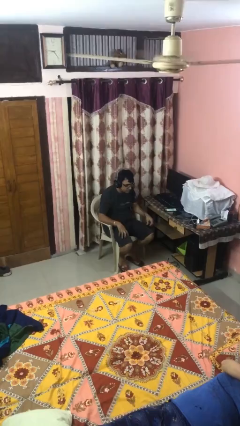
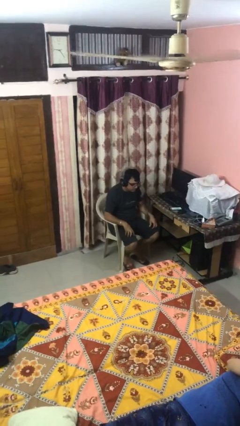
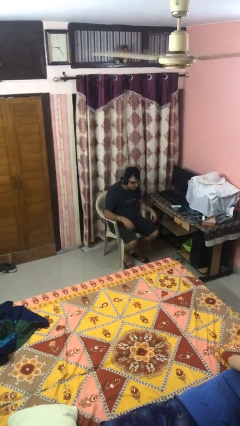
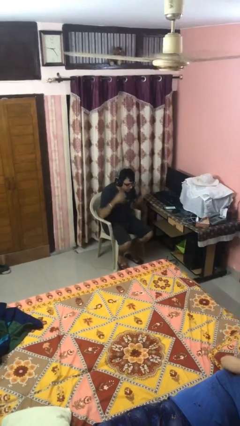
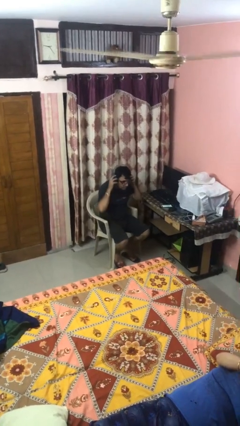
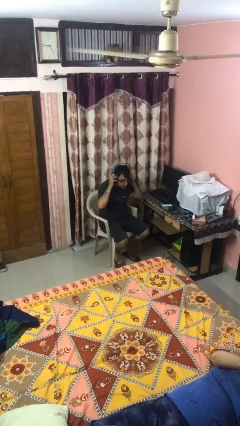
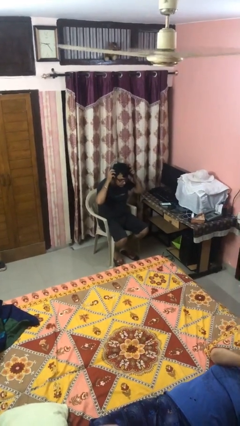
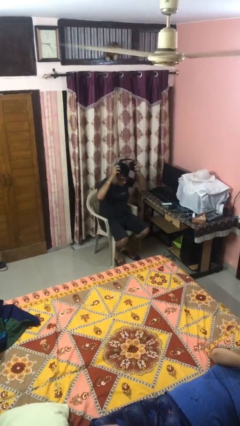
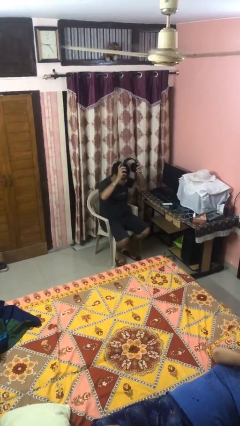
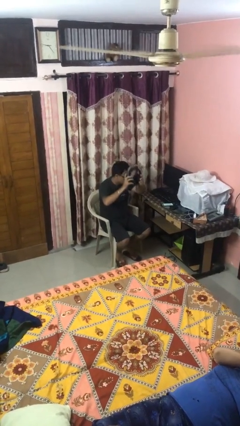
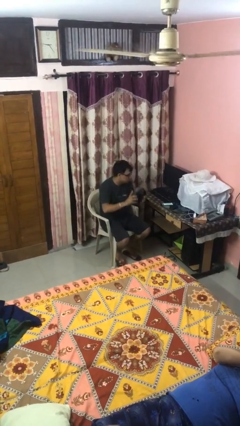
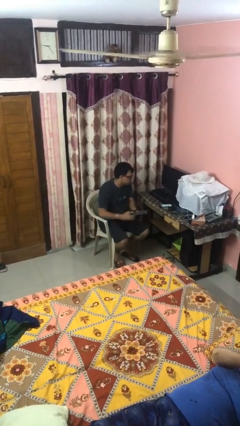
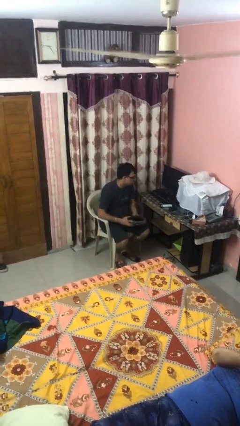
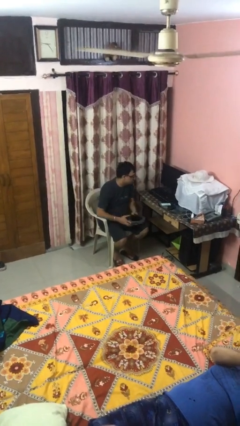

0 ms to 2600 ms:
person takes off headphones

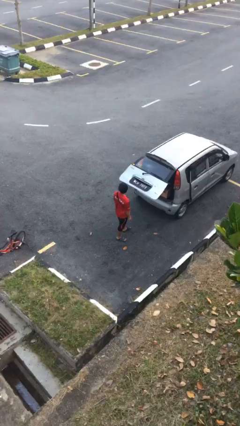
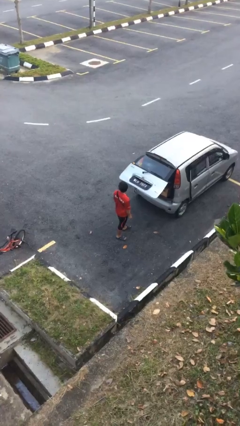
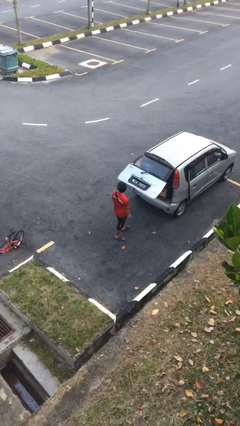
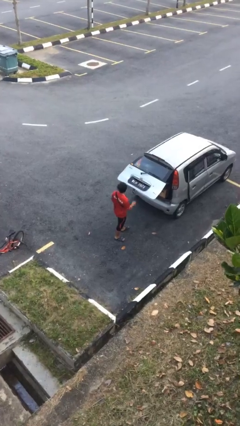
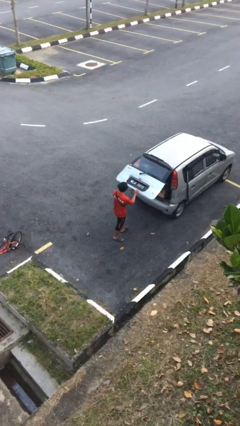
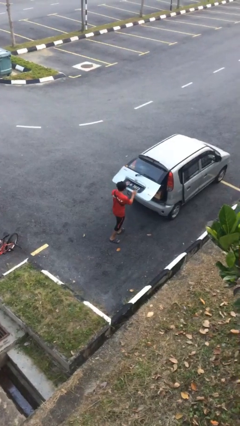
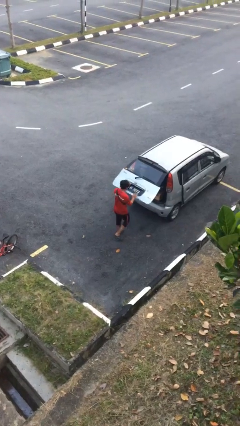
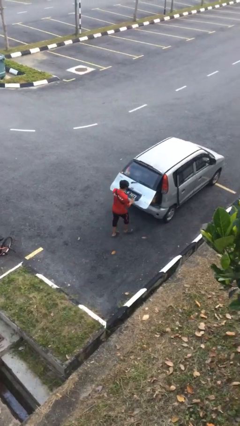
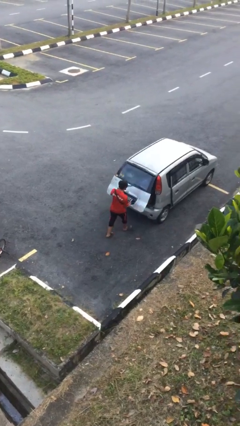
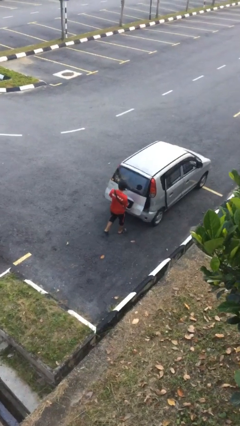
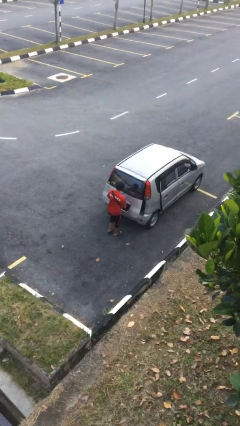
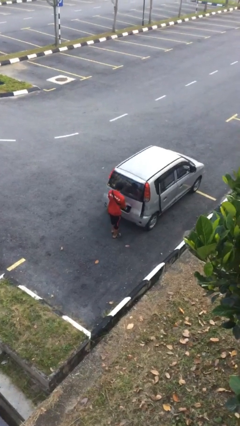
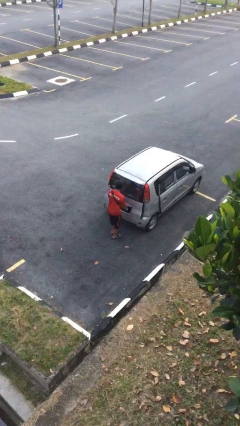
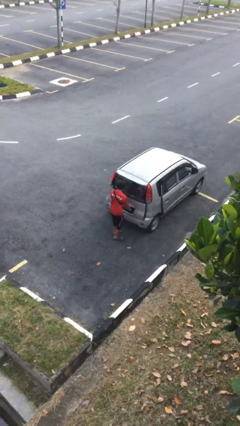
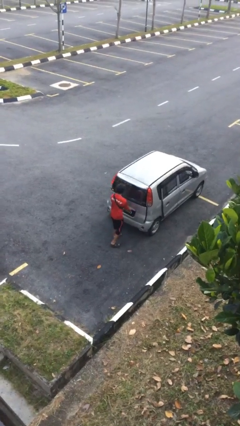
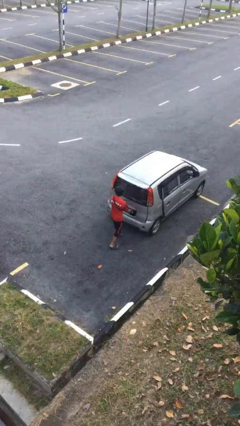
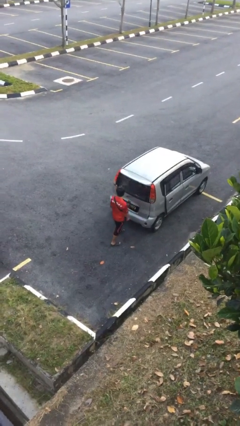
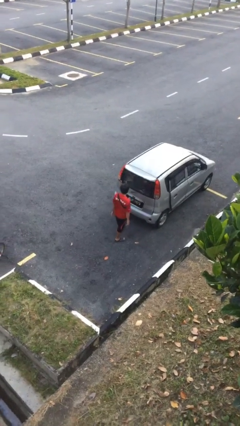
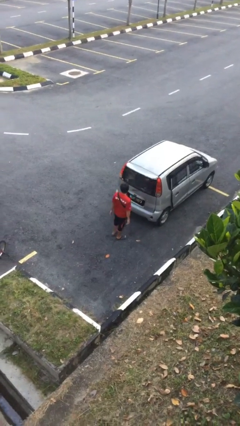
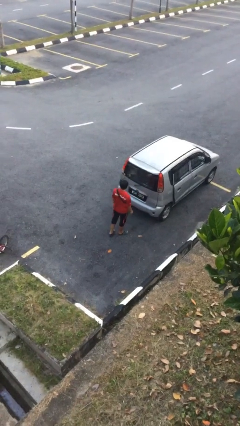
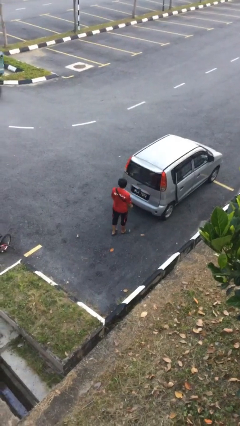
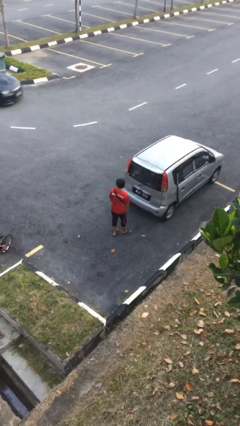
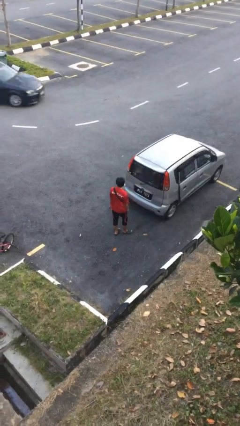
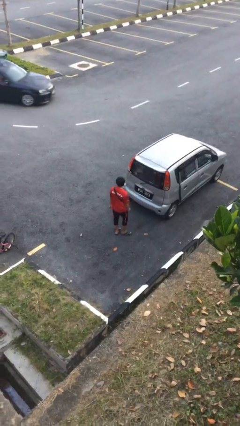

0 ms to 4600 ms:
person closes car trunk

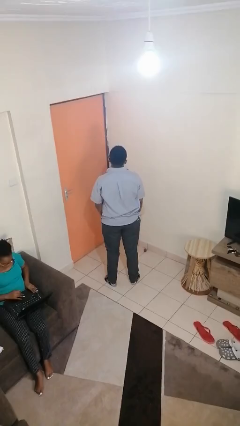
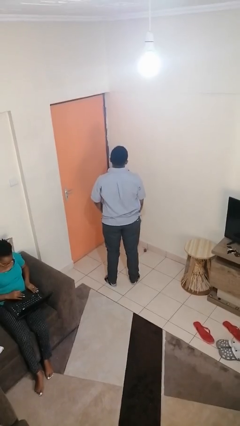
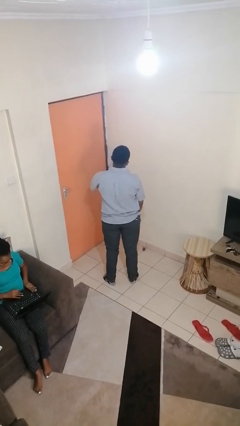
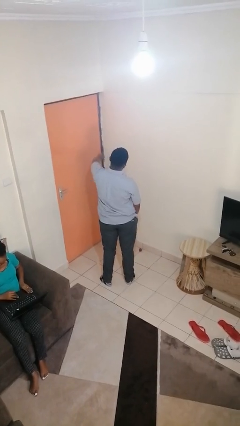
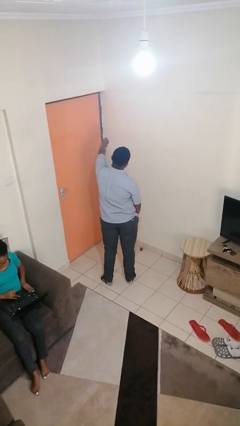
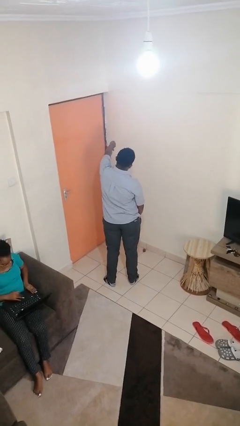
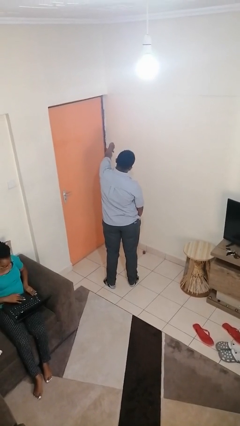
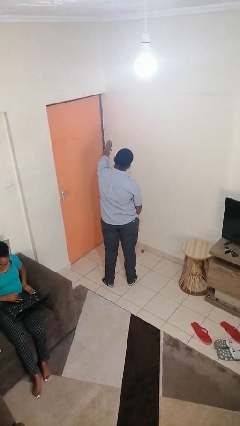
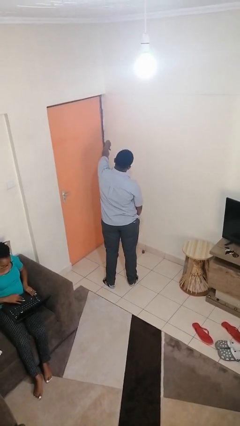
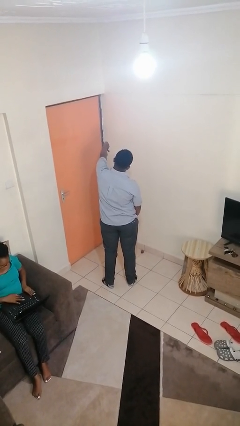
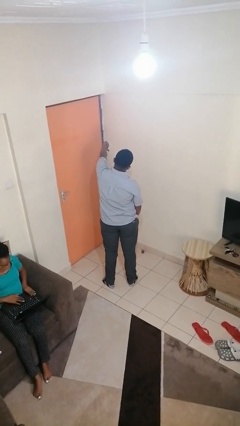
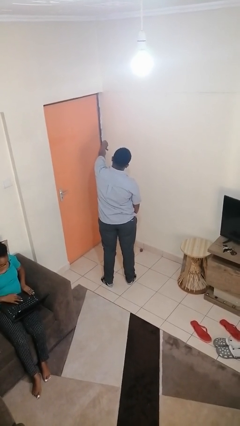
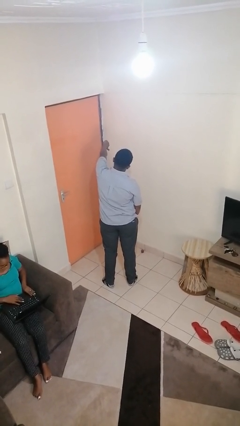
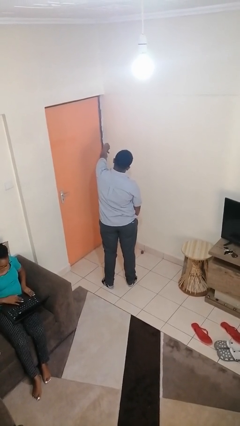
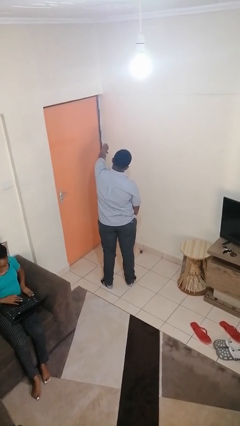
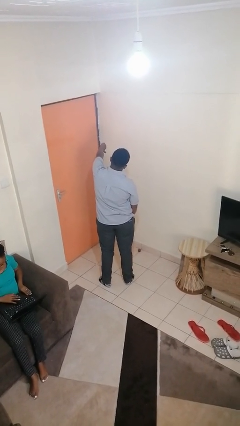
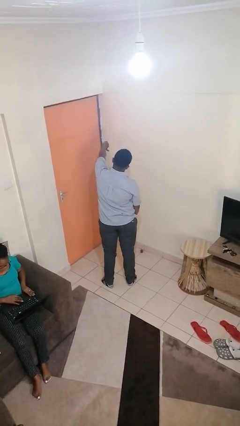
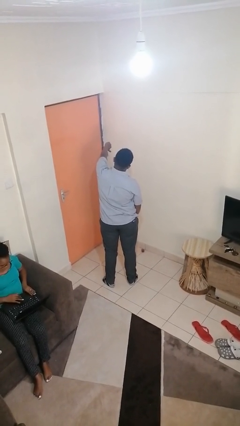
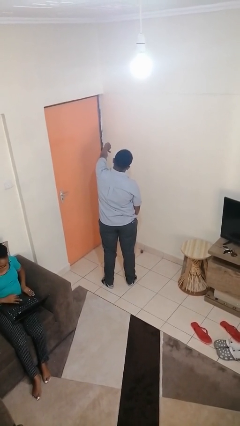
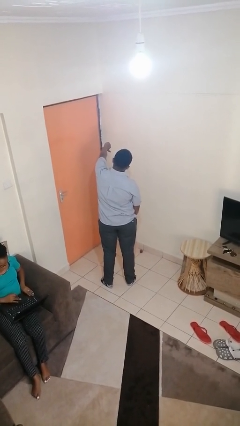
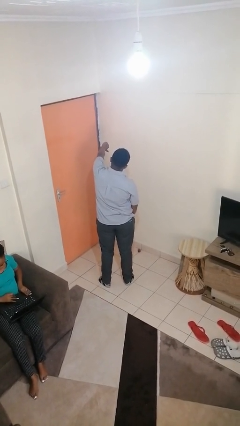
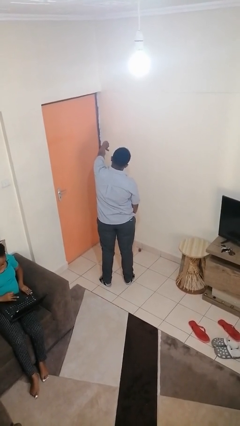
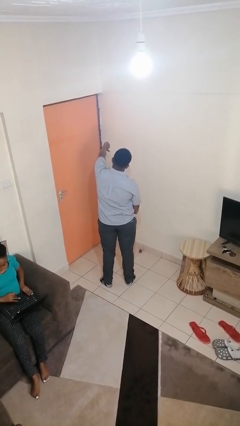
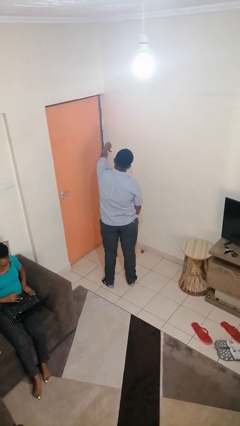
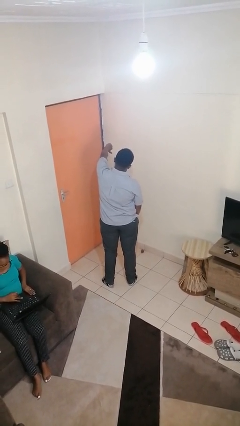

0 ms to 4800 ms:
person gestures thumbs down

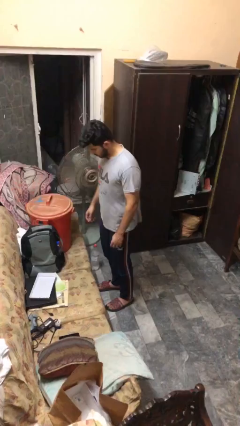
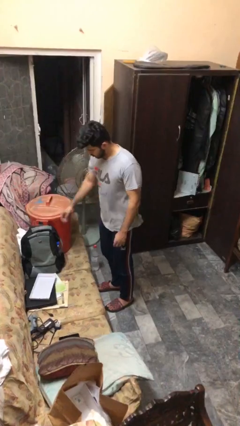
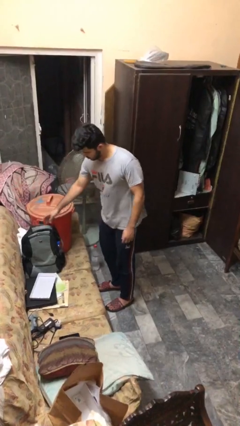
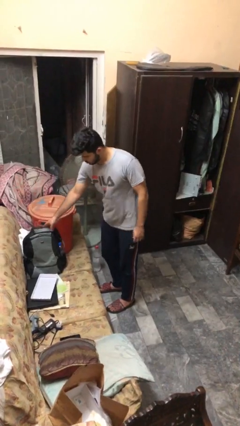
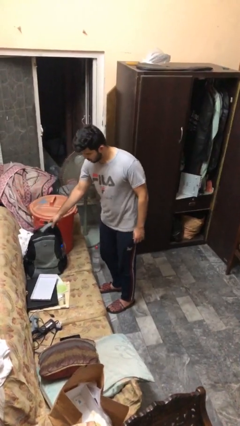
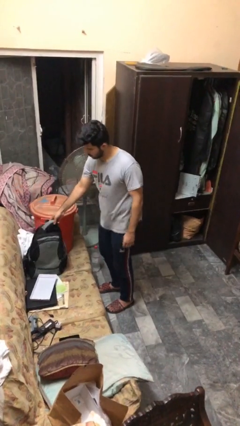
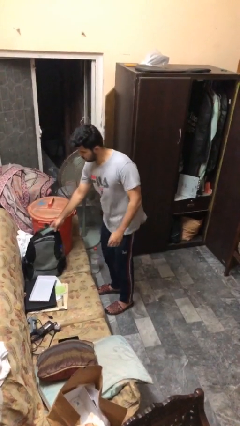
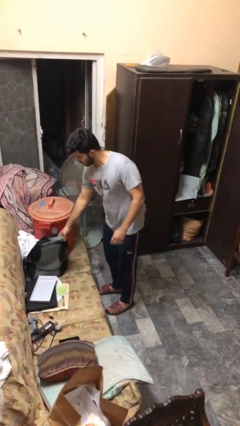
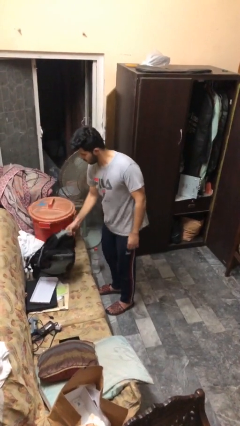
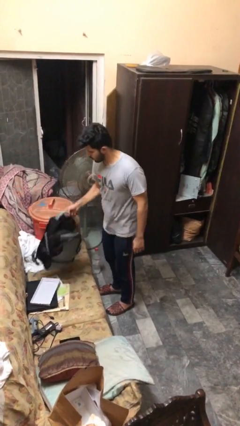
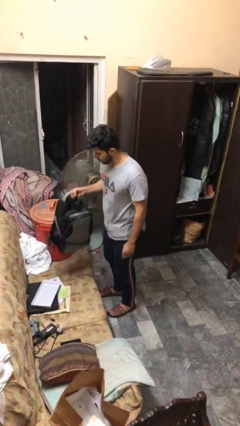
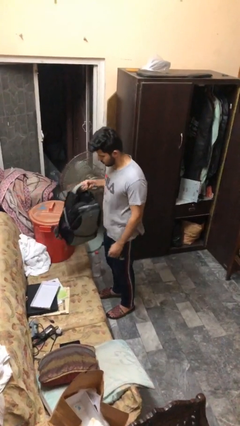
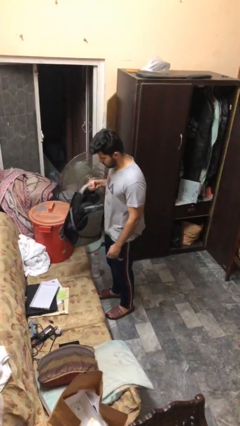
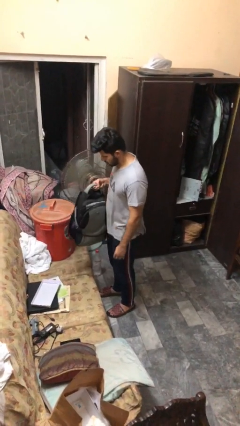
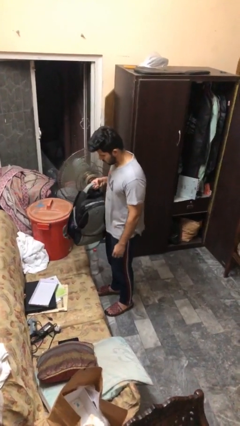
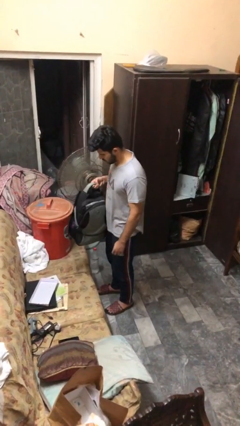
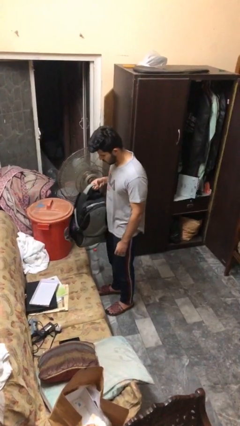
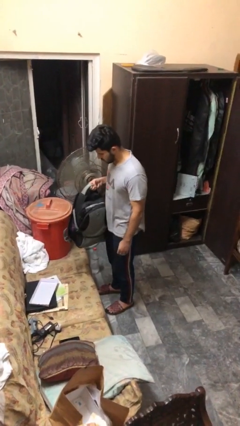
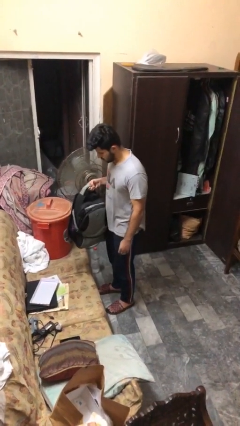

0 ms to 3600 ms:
person picks up object from couch

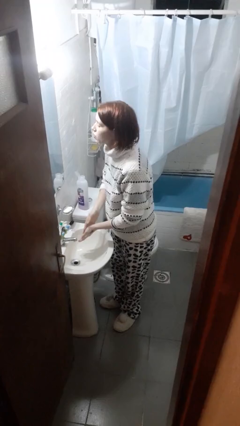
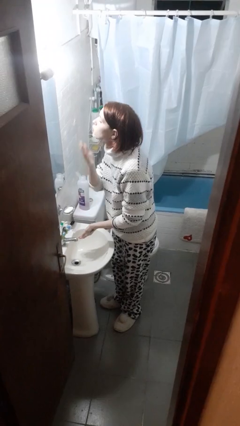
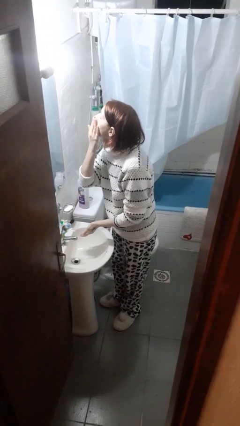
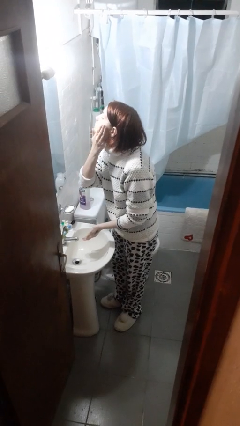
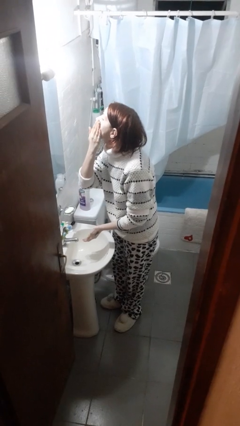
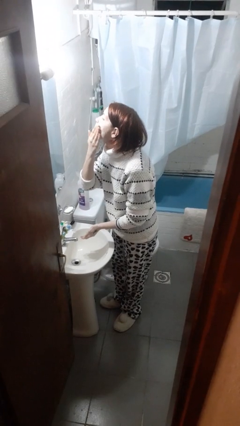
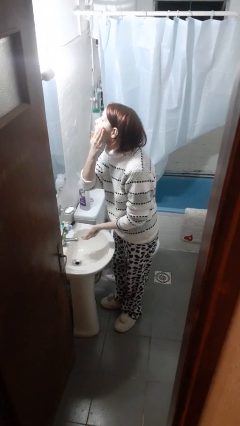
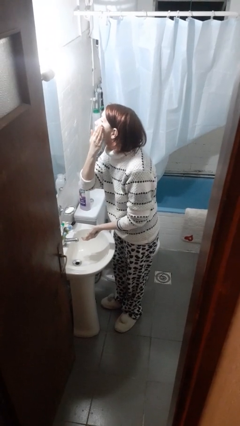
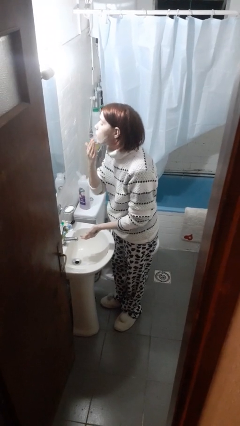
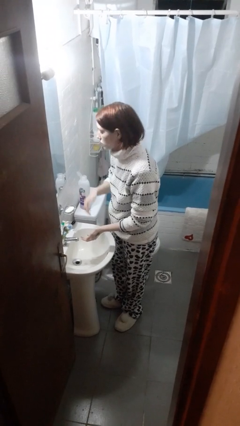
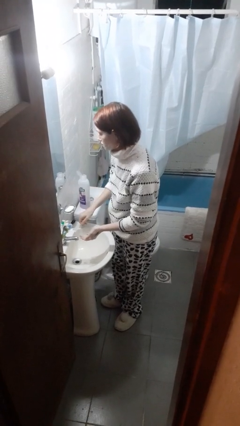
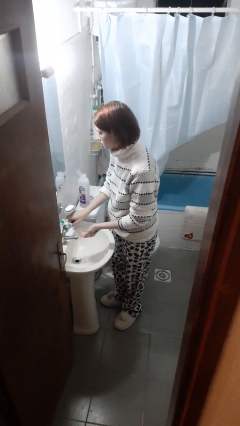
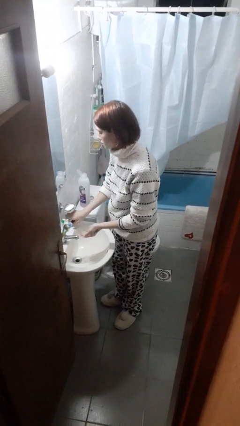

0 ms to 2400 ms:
person applies shaving cream
